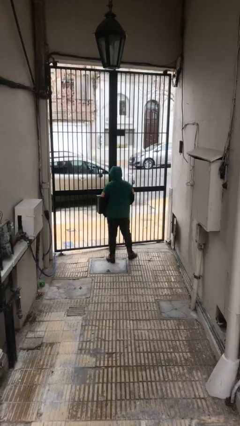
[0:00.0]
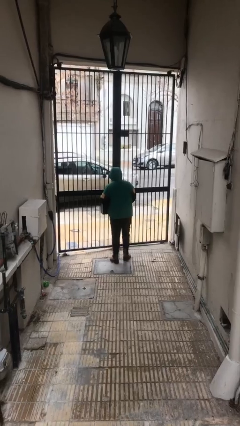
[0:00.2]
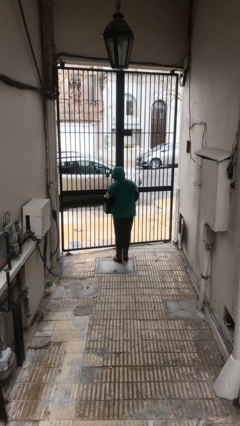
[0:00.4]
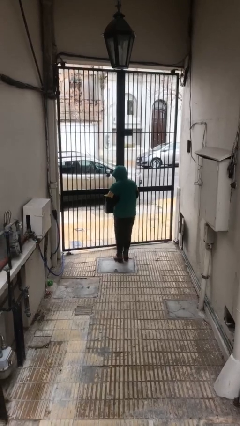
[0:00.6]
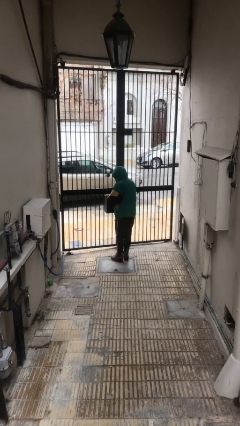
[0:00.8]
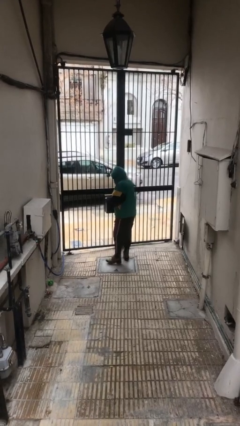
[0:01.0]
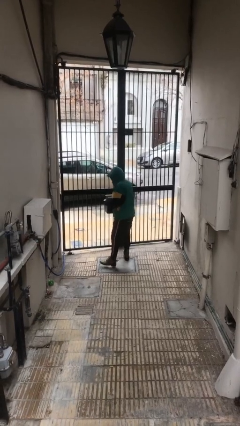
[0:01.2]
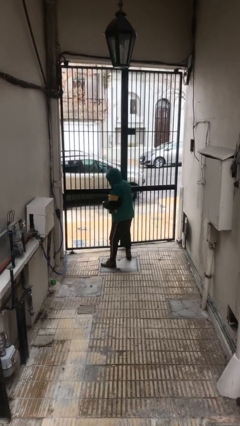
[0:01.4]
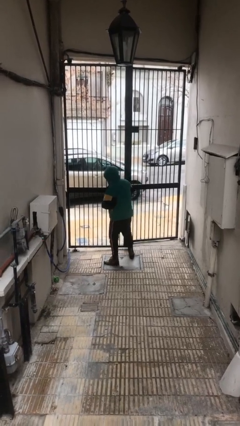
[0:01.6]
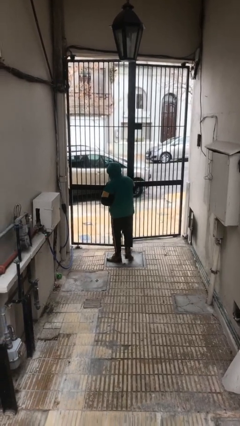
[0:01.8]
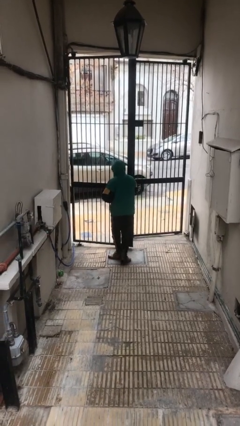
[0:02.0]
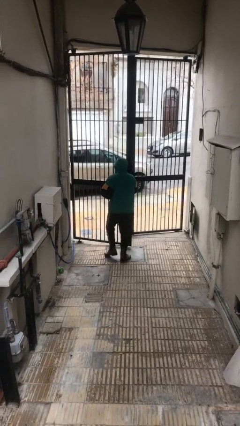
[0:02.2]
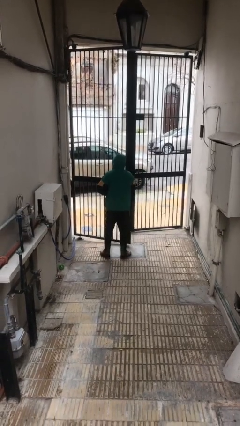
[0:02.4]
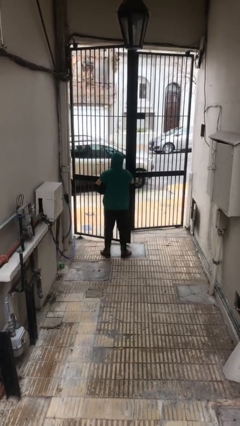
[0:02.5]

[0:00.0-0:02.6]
person opens gate

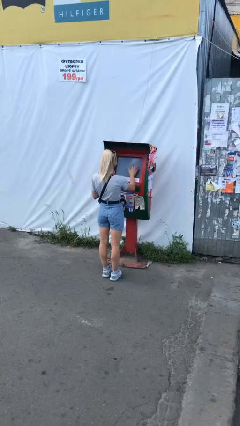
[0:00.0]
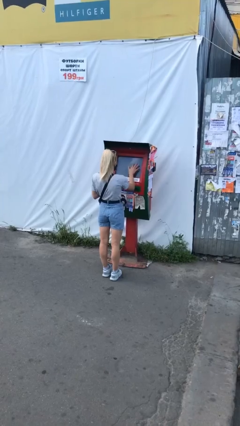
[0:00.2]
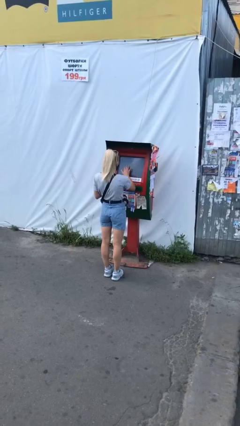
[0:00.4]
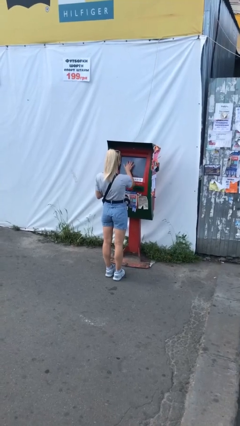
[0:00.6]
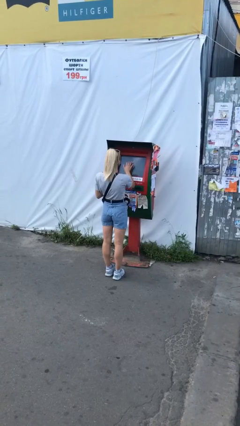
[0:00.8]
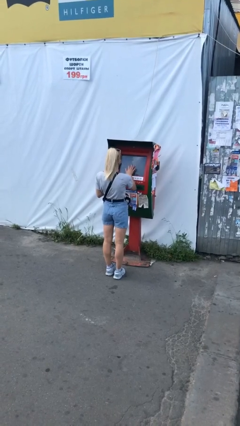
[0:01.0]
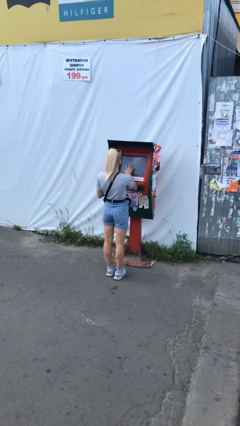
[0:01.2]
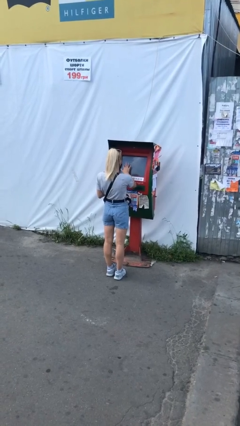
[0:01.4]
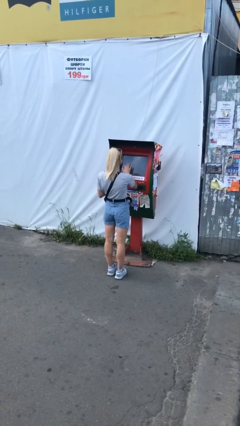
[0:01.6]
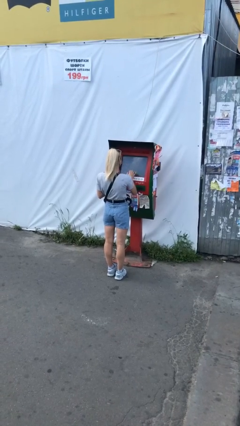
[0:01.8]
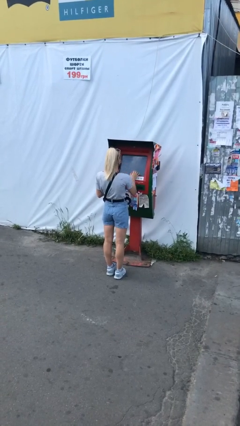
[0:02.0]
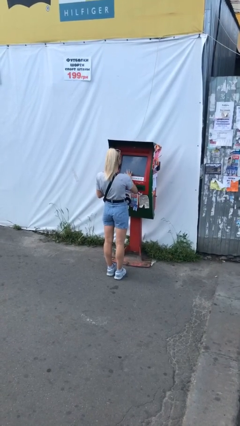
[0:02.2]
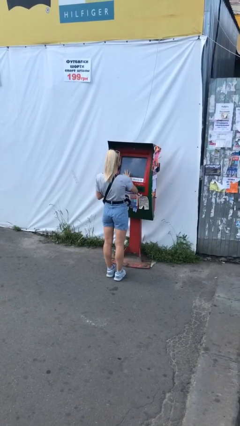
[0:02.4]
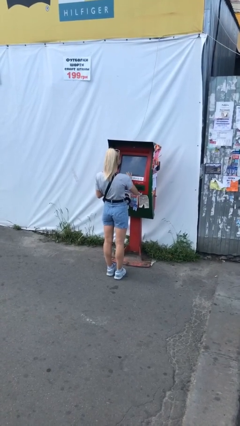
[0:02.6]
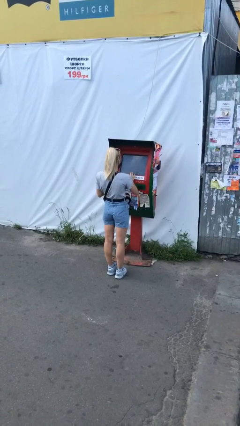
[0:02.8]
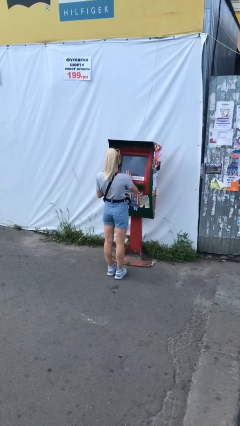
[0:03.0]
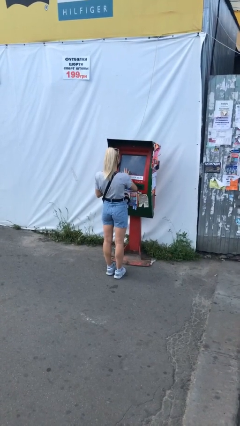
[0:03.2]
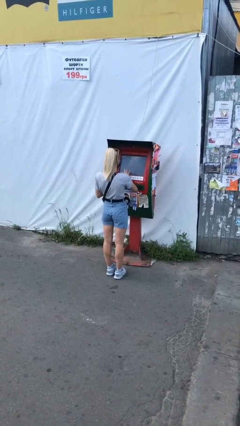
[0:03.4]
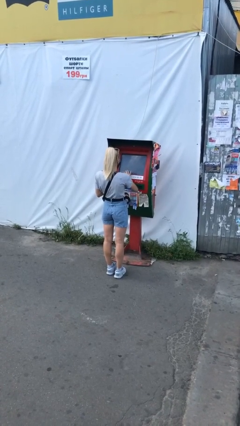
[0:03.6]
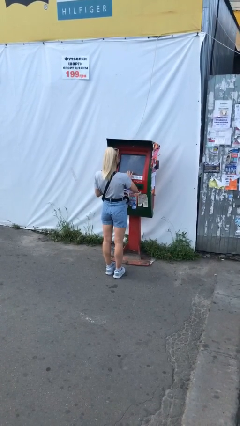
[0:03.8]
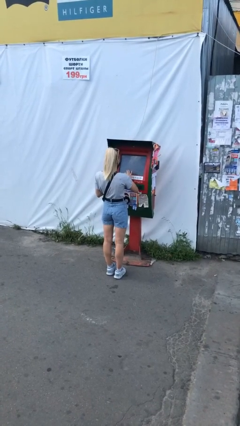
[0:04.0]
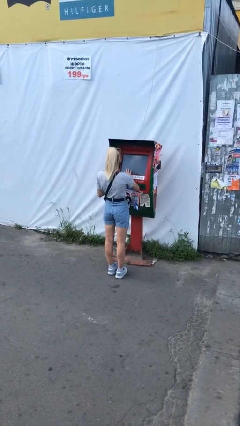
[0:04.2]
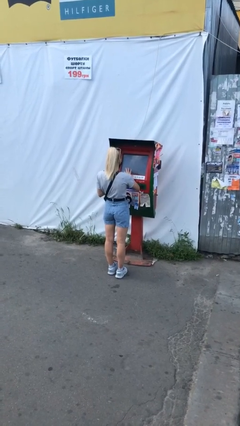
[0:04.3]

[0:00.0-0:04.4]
person purchases from machine

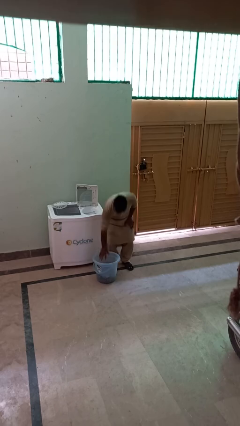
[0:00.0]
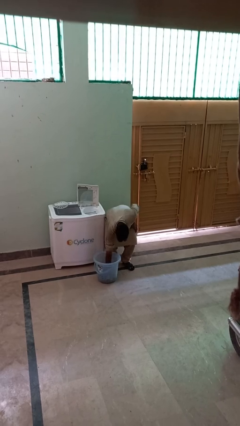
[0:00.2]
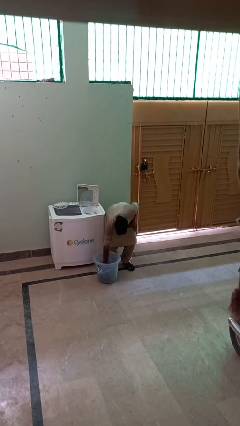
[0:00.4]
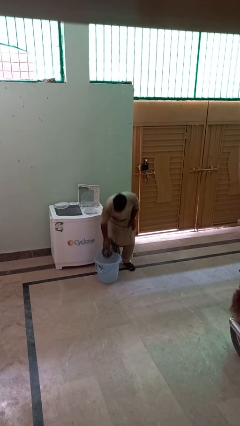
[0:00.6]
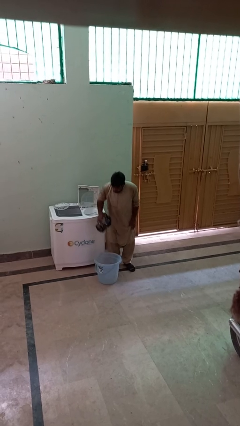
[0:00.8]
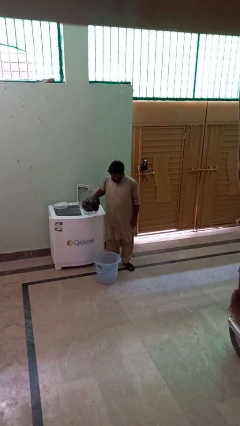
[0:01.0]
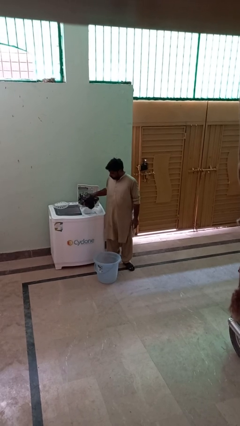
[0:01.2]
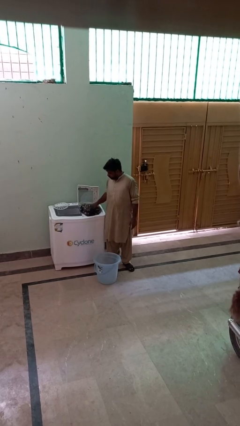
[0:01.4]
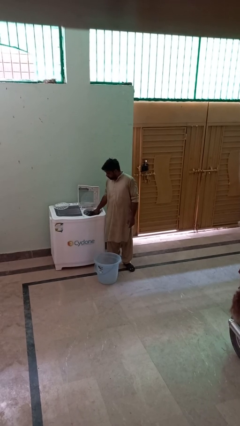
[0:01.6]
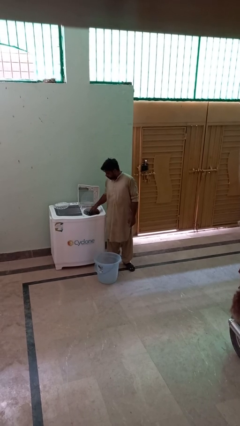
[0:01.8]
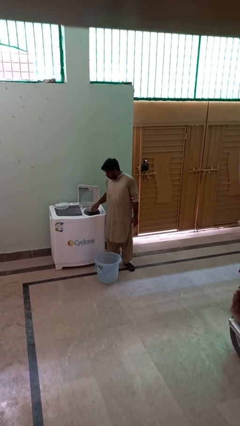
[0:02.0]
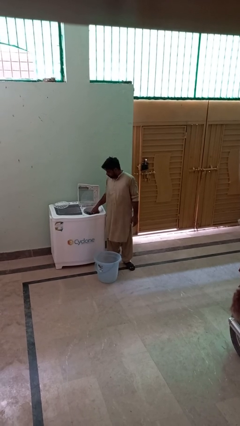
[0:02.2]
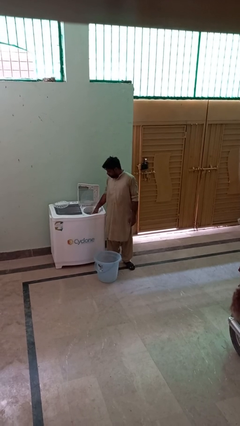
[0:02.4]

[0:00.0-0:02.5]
person loads dryer

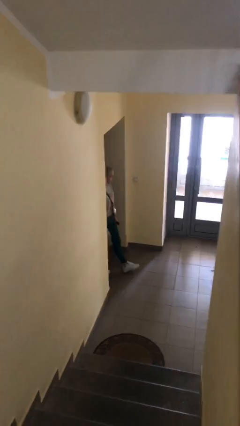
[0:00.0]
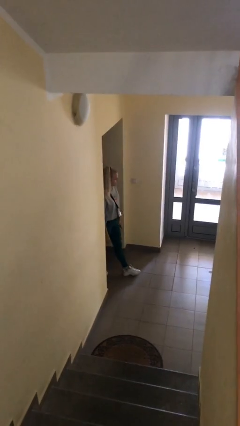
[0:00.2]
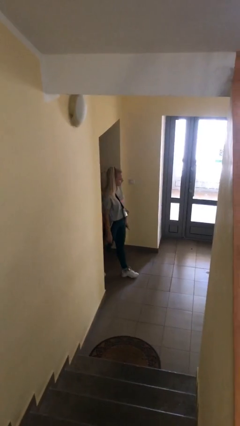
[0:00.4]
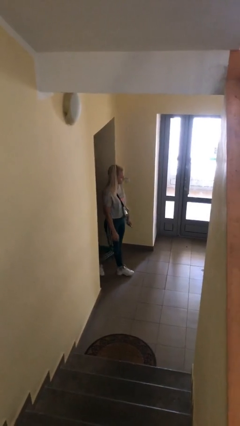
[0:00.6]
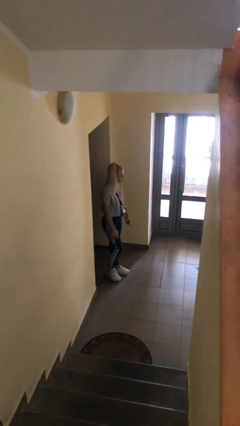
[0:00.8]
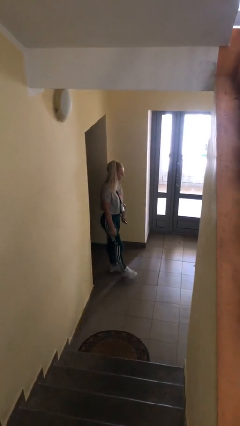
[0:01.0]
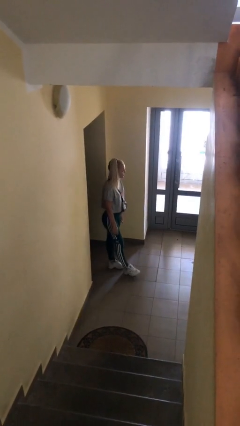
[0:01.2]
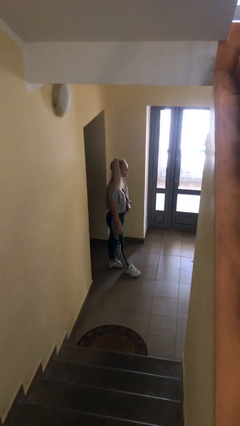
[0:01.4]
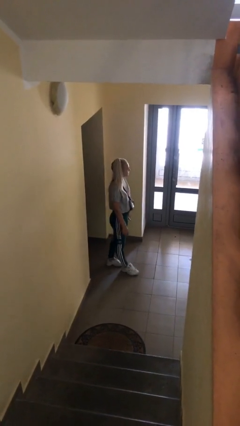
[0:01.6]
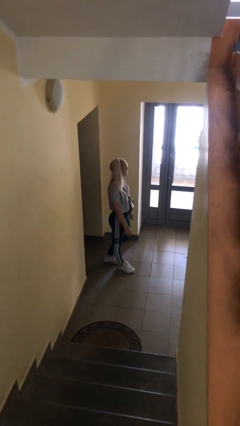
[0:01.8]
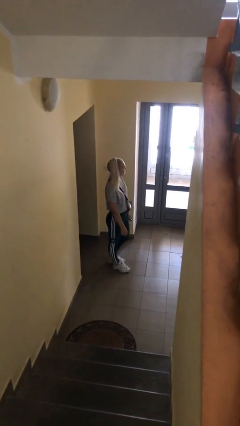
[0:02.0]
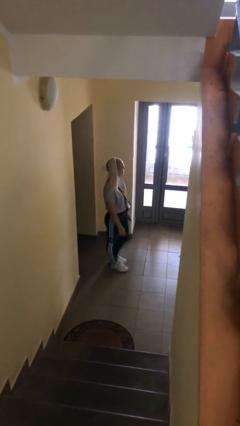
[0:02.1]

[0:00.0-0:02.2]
person enters scene through structure

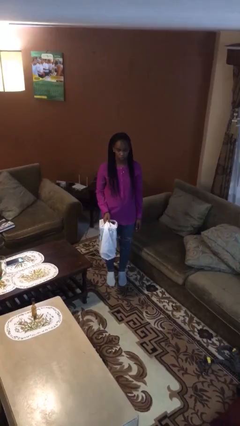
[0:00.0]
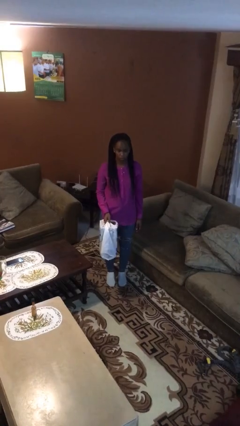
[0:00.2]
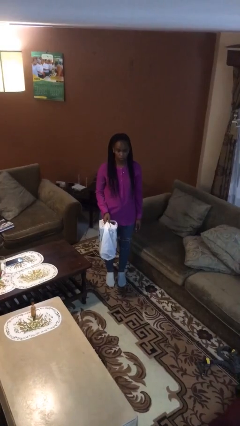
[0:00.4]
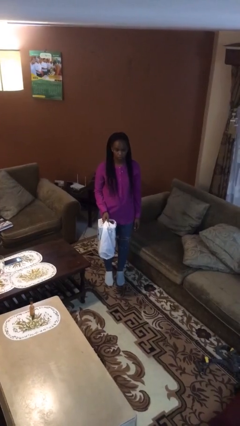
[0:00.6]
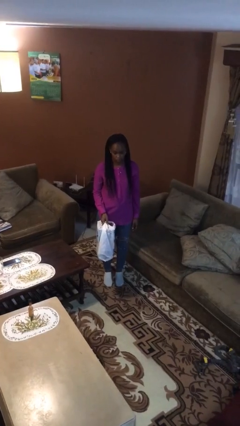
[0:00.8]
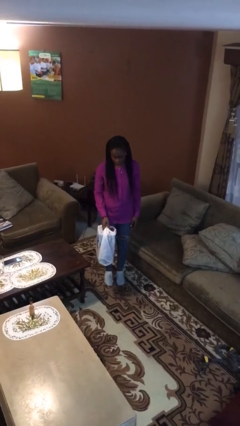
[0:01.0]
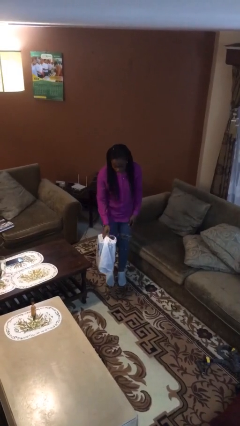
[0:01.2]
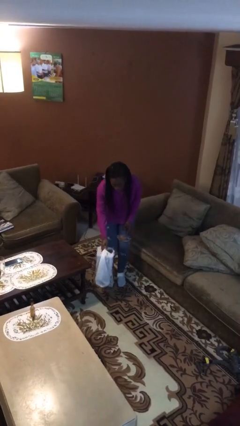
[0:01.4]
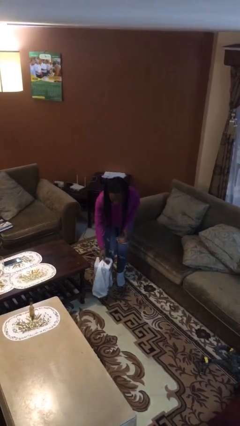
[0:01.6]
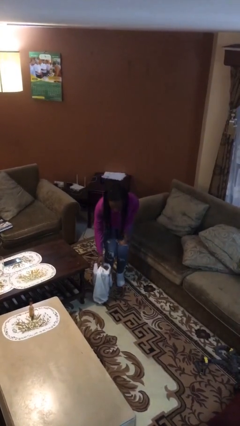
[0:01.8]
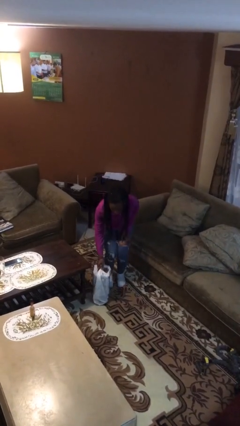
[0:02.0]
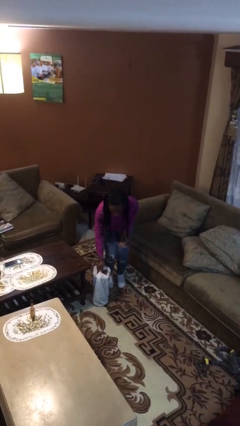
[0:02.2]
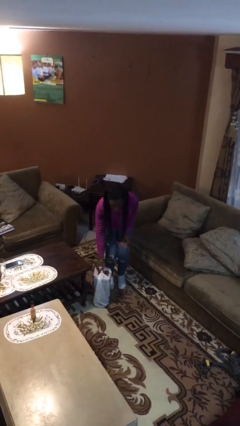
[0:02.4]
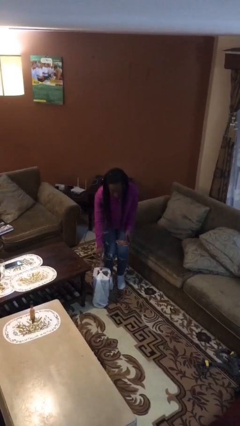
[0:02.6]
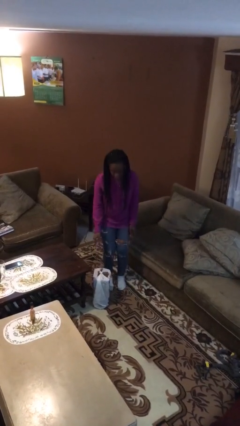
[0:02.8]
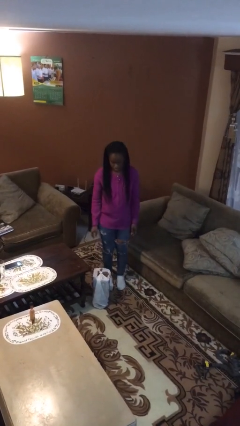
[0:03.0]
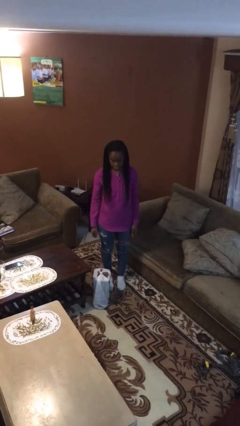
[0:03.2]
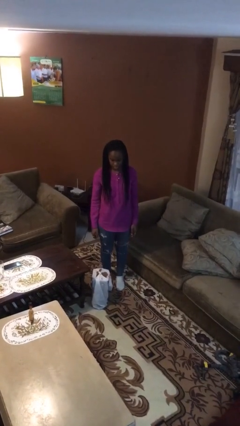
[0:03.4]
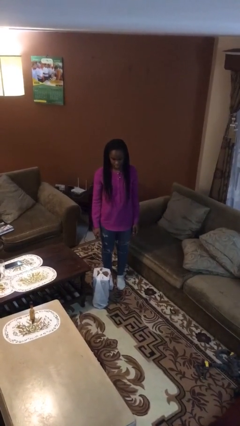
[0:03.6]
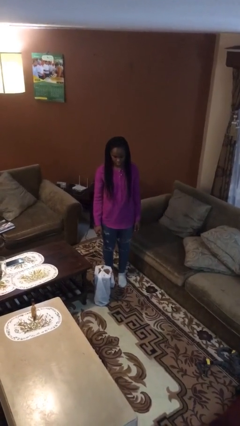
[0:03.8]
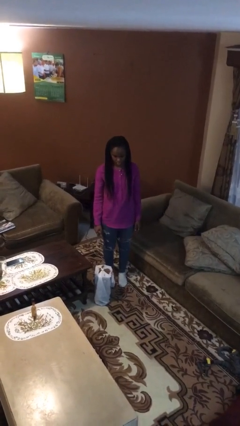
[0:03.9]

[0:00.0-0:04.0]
person puts down object on floor

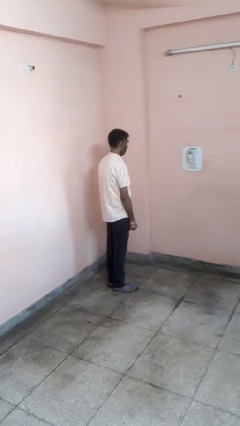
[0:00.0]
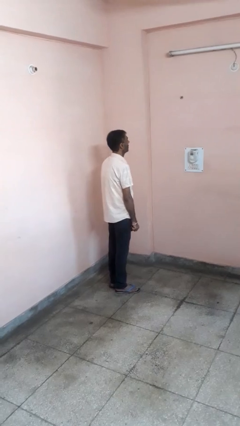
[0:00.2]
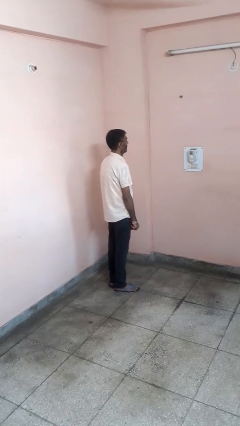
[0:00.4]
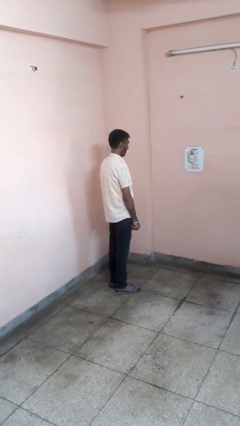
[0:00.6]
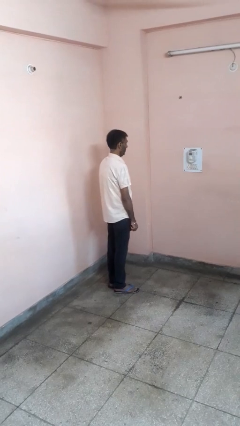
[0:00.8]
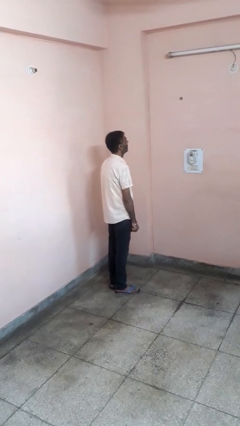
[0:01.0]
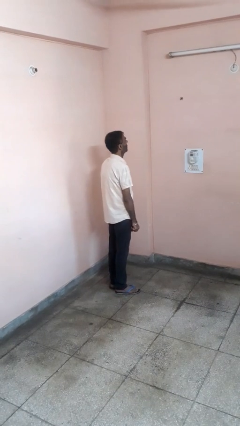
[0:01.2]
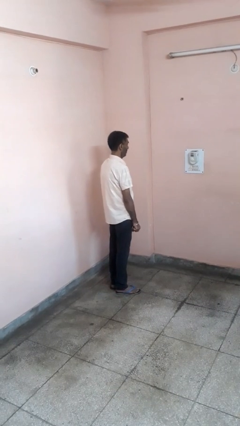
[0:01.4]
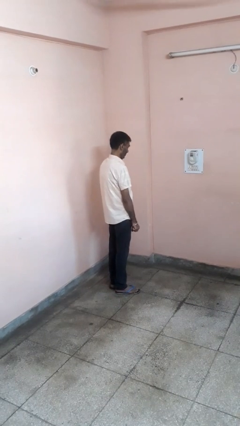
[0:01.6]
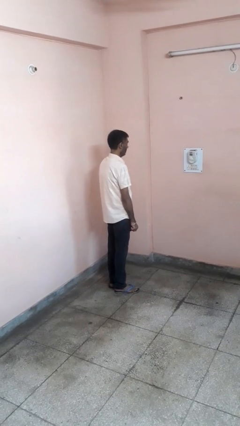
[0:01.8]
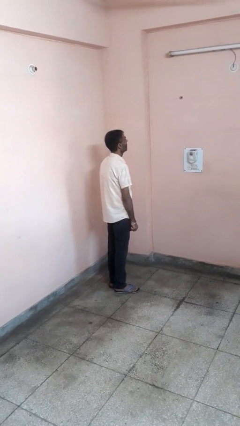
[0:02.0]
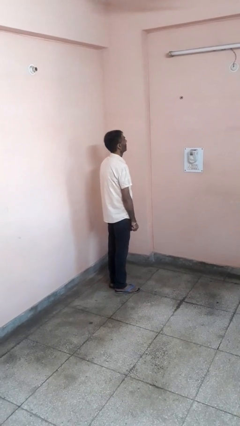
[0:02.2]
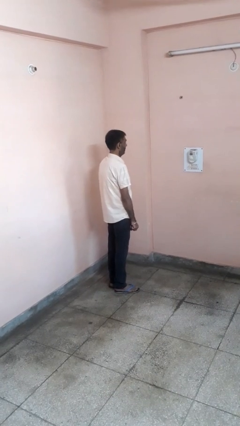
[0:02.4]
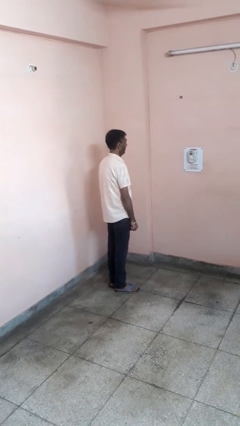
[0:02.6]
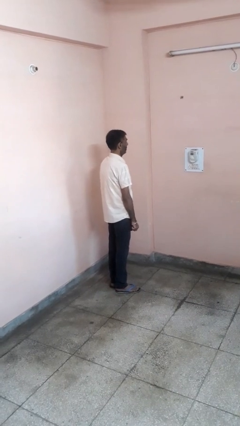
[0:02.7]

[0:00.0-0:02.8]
person nods head
